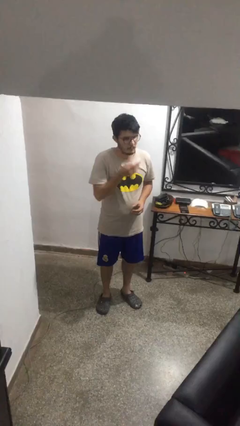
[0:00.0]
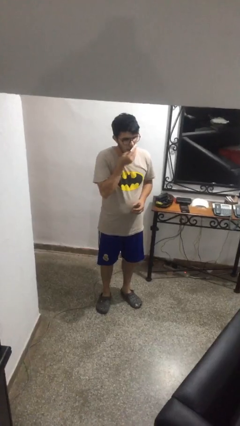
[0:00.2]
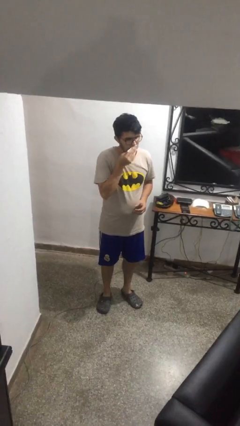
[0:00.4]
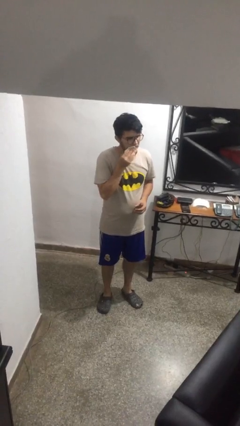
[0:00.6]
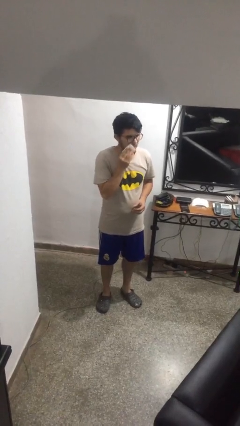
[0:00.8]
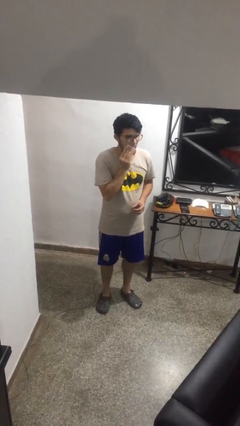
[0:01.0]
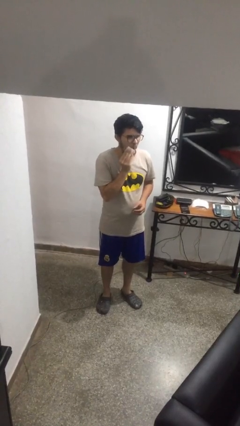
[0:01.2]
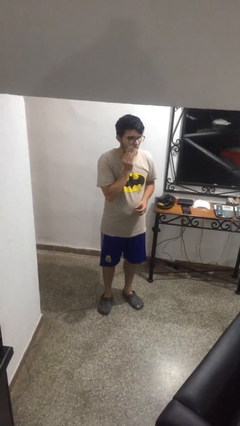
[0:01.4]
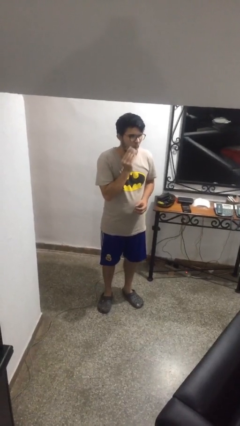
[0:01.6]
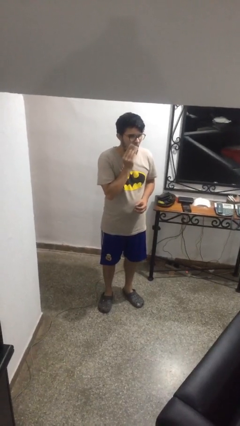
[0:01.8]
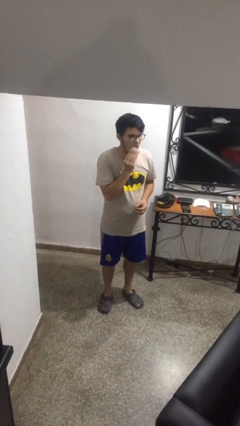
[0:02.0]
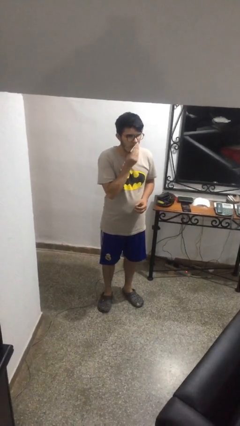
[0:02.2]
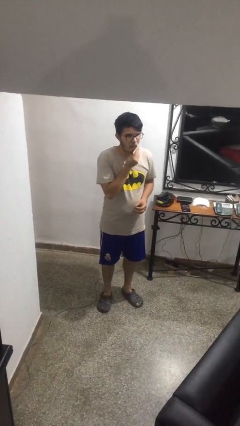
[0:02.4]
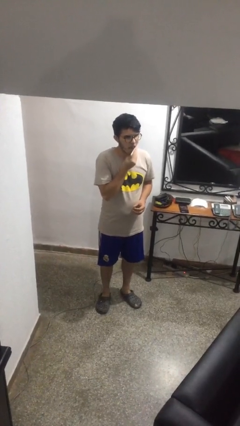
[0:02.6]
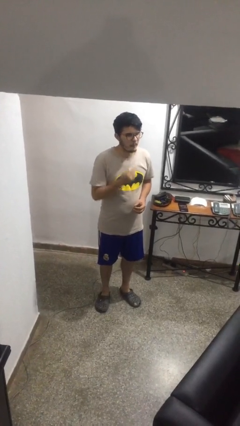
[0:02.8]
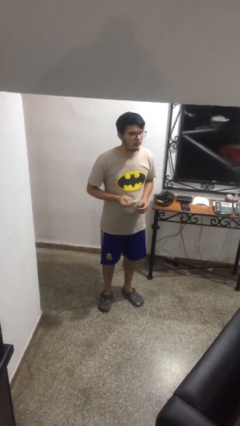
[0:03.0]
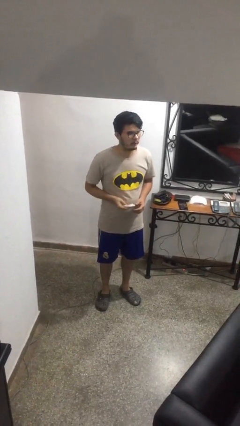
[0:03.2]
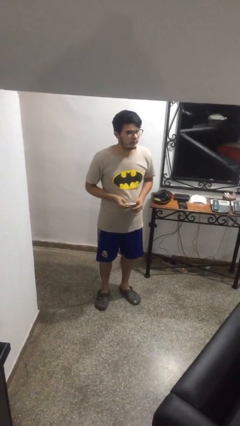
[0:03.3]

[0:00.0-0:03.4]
person wipes mouth with napkin

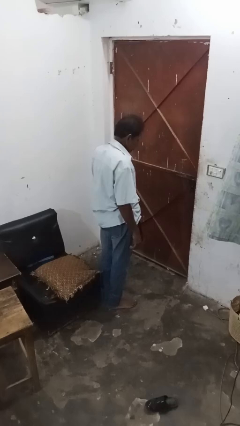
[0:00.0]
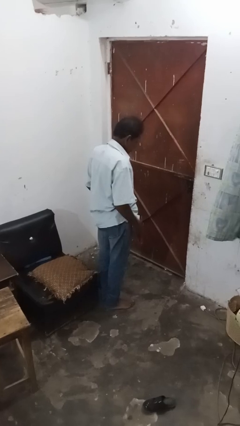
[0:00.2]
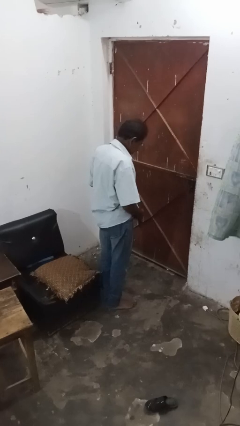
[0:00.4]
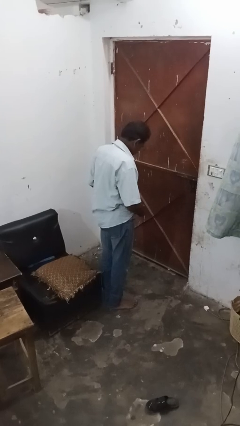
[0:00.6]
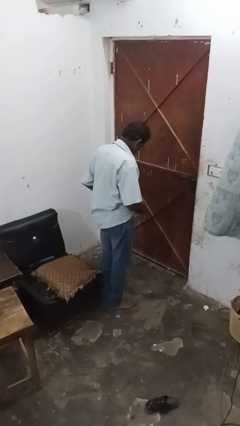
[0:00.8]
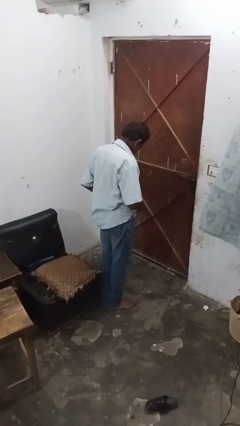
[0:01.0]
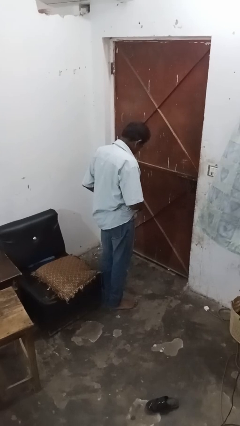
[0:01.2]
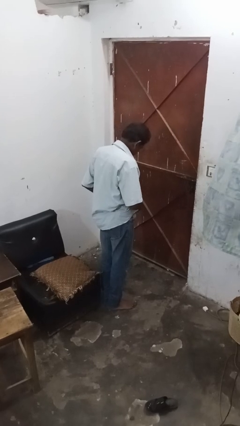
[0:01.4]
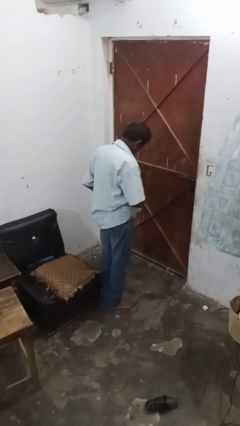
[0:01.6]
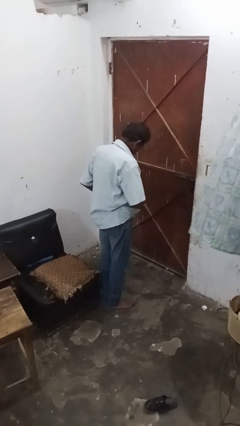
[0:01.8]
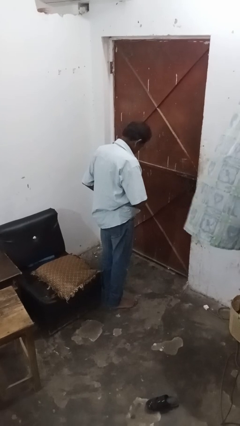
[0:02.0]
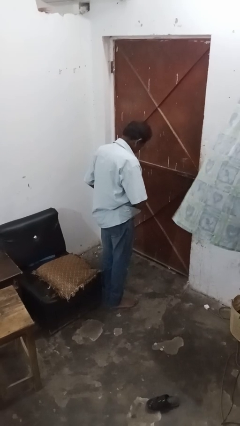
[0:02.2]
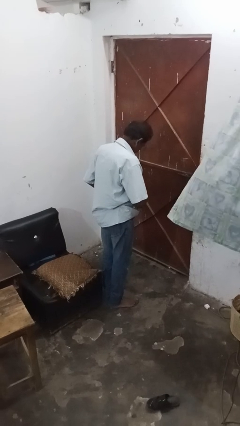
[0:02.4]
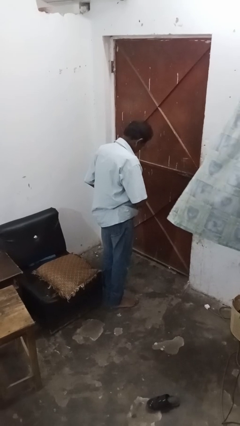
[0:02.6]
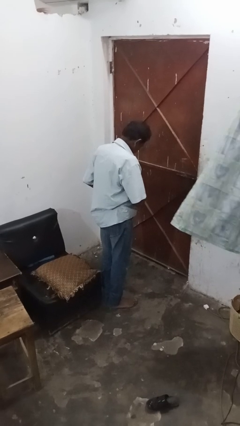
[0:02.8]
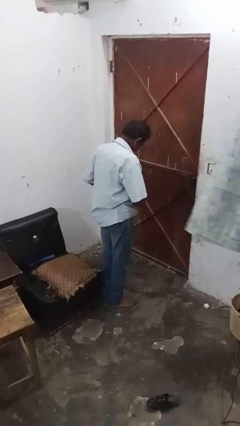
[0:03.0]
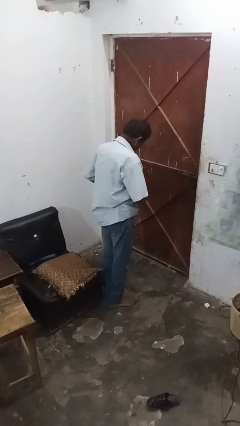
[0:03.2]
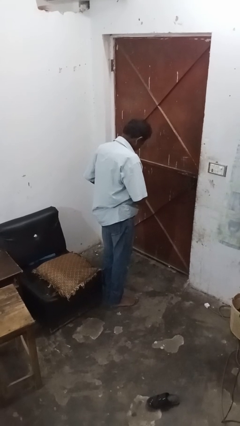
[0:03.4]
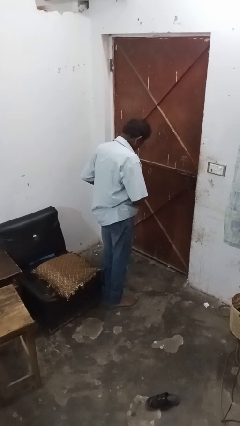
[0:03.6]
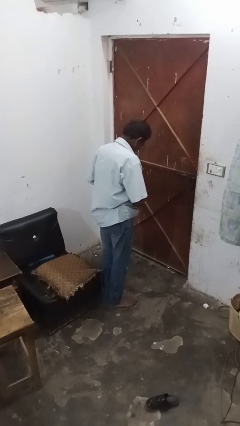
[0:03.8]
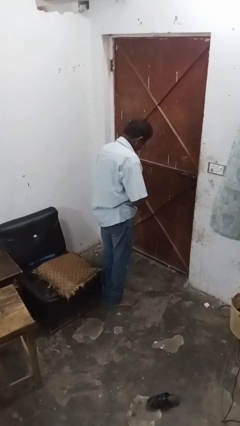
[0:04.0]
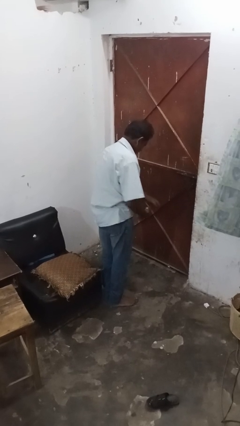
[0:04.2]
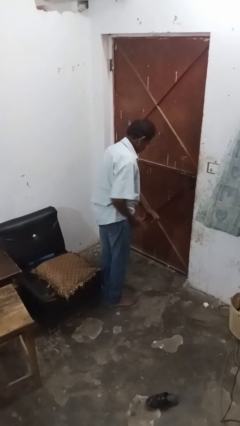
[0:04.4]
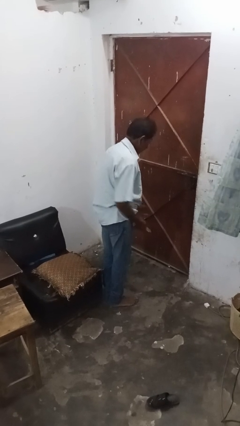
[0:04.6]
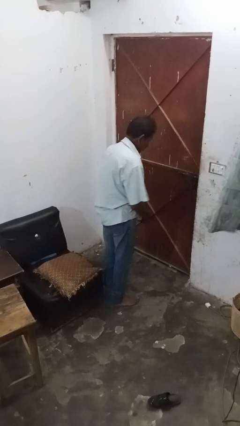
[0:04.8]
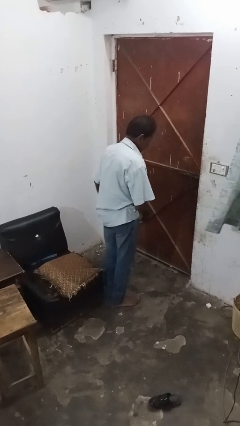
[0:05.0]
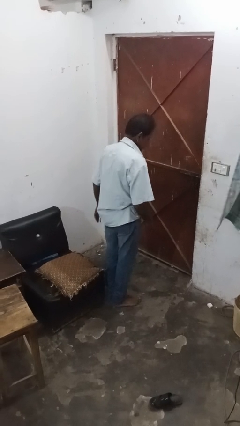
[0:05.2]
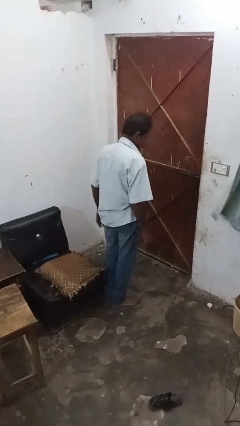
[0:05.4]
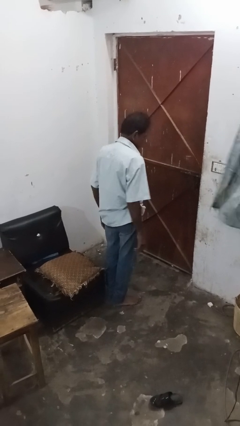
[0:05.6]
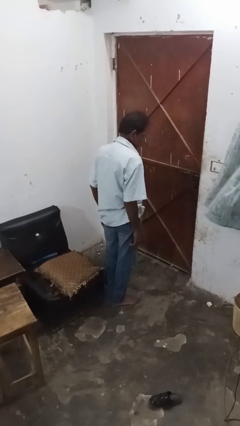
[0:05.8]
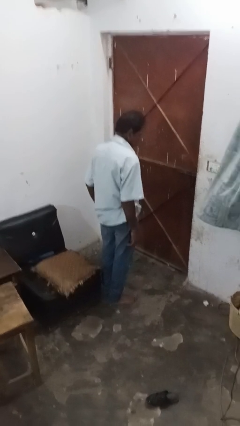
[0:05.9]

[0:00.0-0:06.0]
person puts on belt

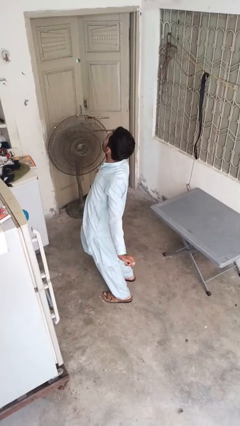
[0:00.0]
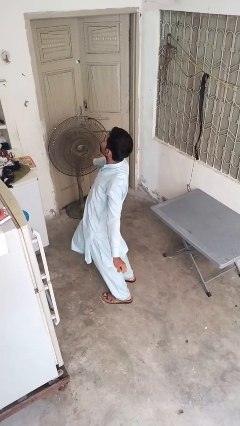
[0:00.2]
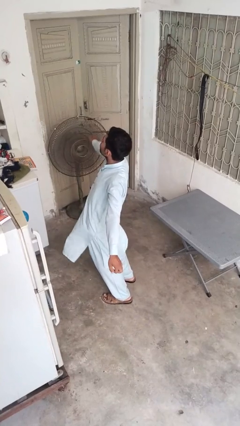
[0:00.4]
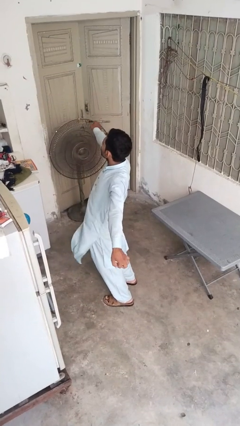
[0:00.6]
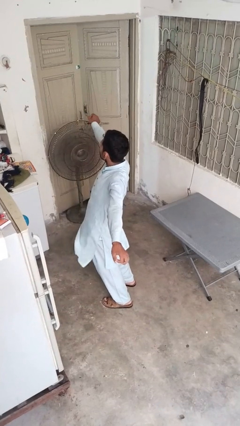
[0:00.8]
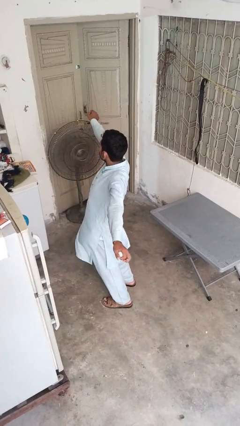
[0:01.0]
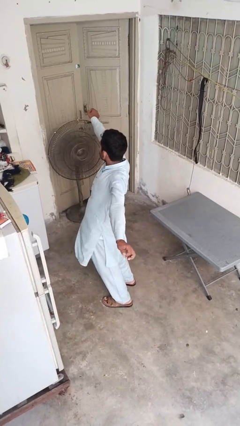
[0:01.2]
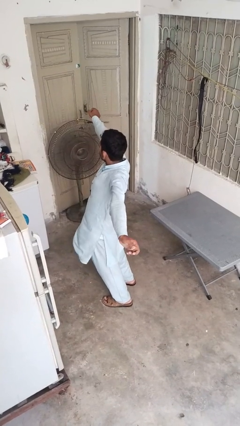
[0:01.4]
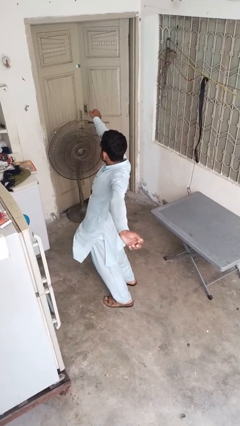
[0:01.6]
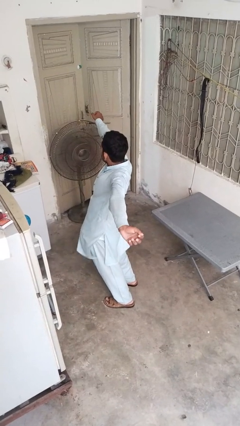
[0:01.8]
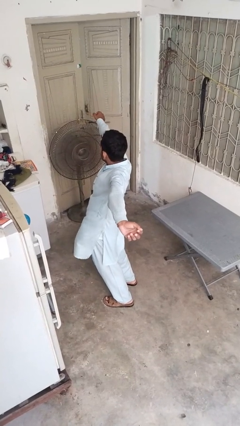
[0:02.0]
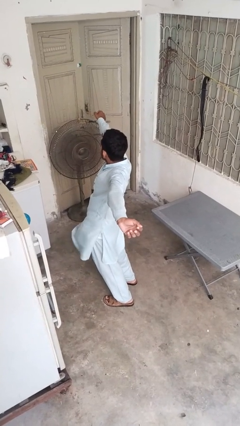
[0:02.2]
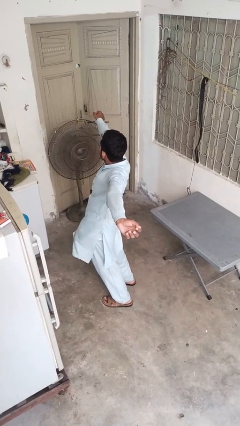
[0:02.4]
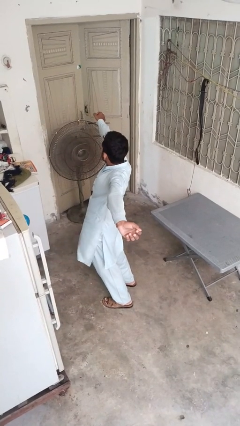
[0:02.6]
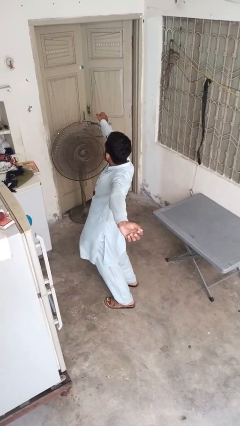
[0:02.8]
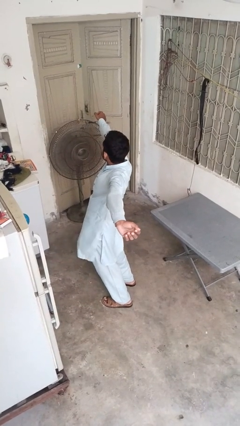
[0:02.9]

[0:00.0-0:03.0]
person stretches arms to side

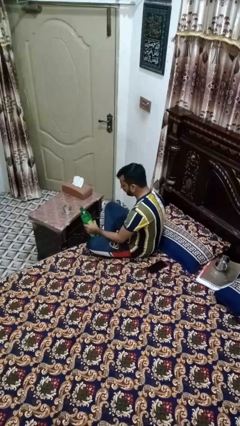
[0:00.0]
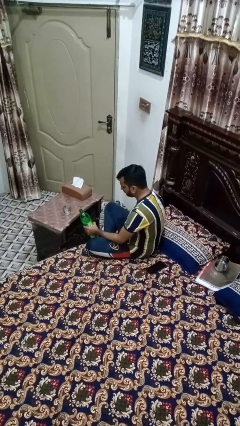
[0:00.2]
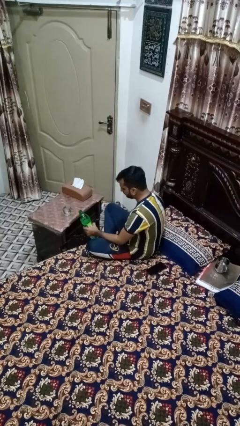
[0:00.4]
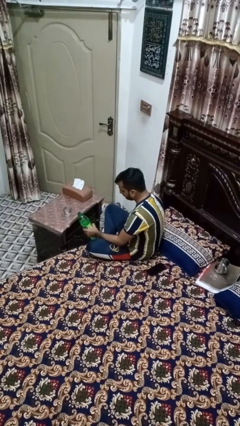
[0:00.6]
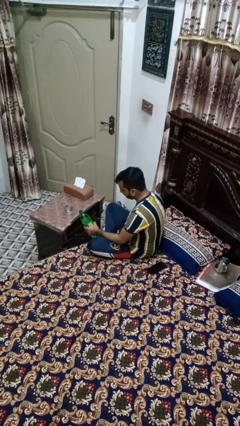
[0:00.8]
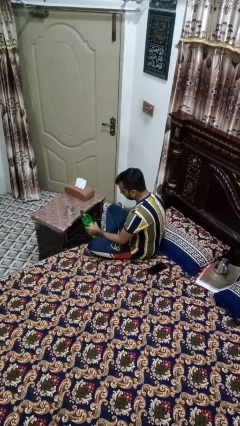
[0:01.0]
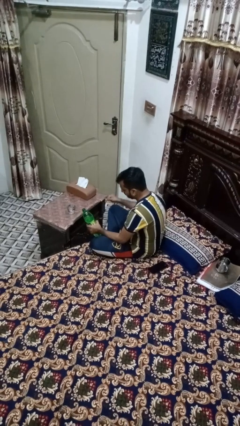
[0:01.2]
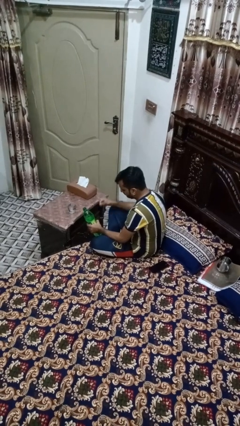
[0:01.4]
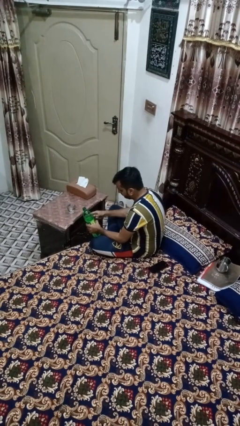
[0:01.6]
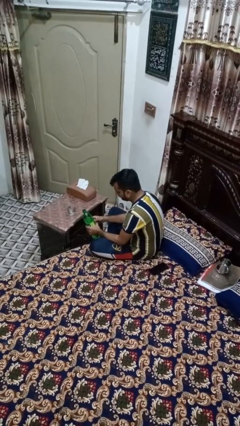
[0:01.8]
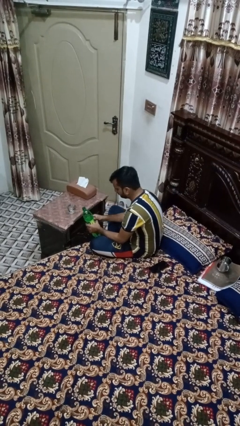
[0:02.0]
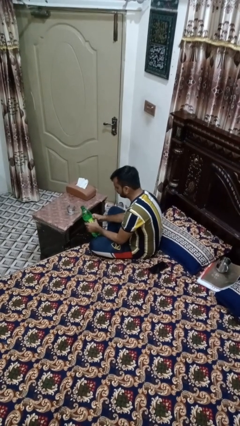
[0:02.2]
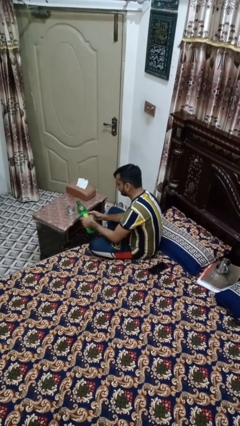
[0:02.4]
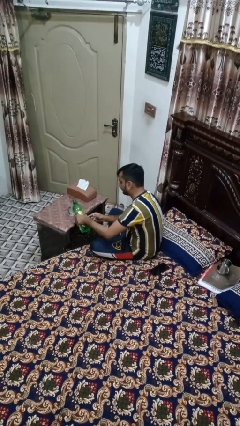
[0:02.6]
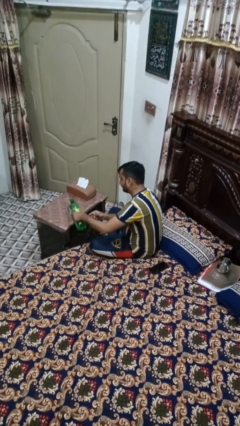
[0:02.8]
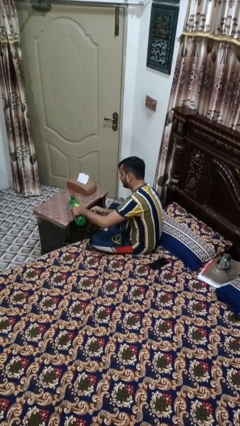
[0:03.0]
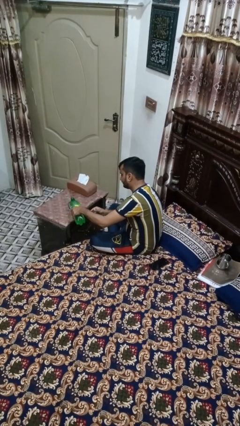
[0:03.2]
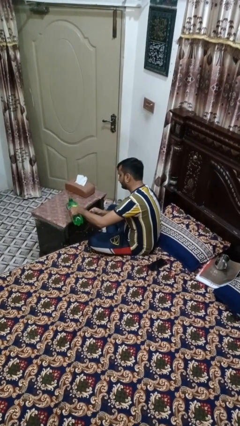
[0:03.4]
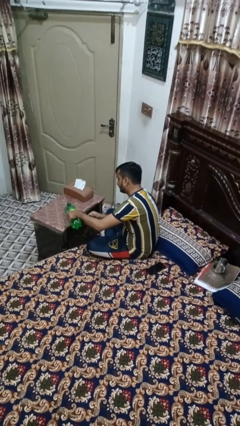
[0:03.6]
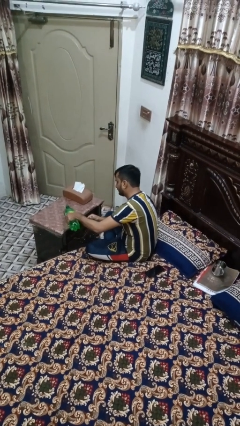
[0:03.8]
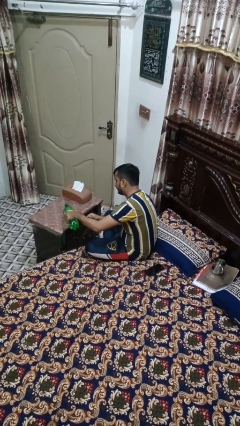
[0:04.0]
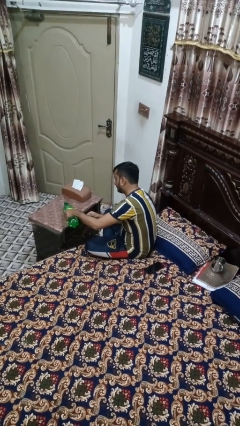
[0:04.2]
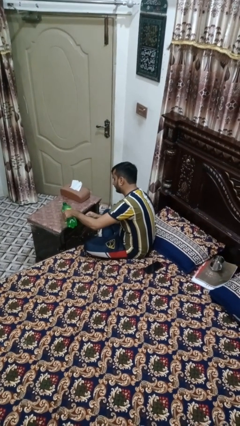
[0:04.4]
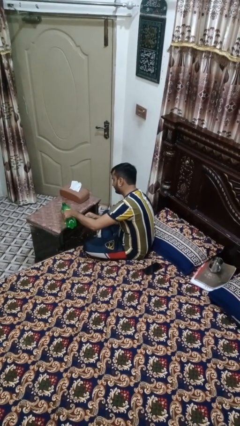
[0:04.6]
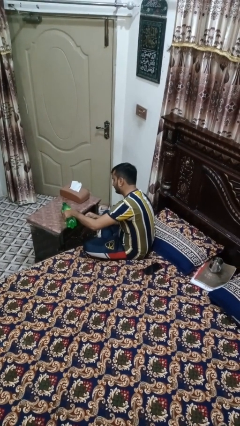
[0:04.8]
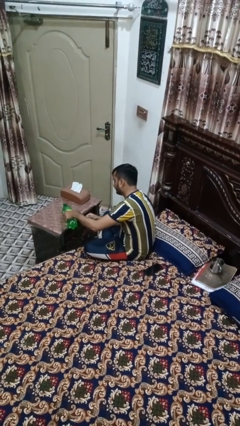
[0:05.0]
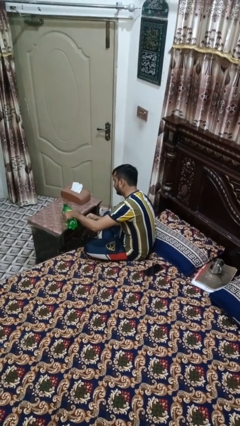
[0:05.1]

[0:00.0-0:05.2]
person pours liquid into cup
